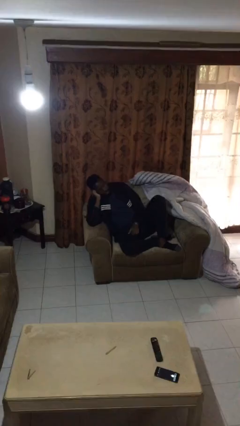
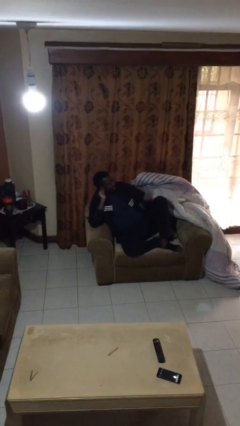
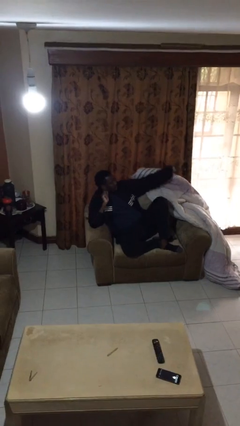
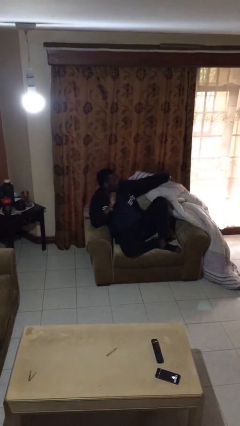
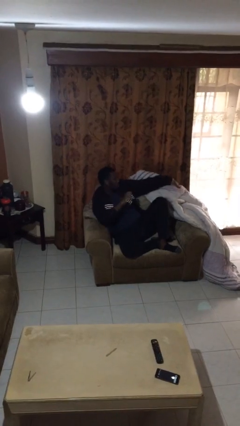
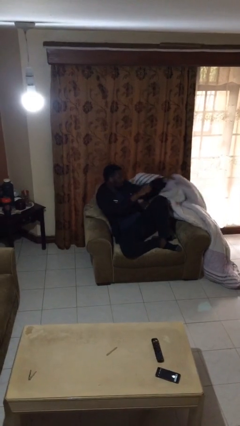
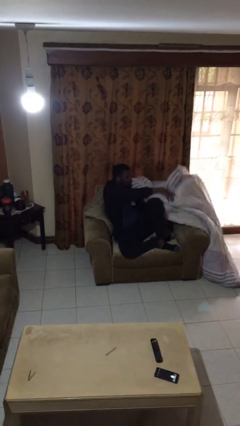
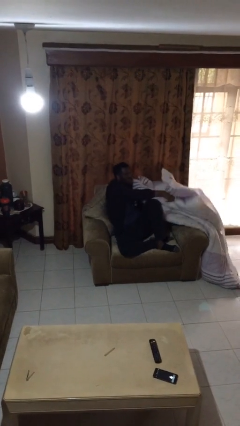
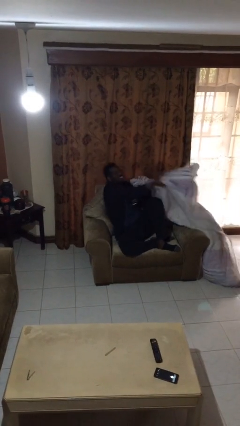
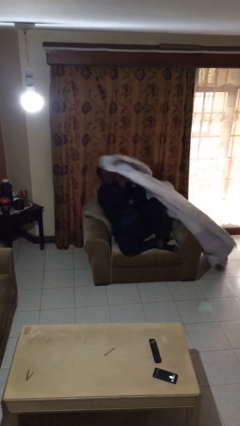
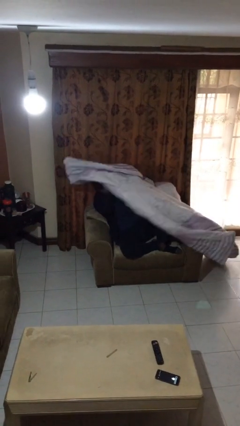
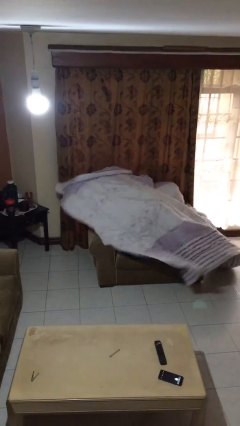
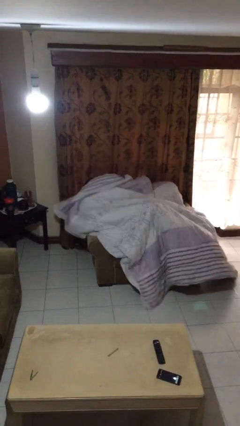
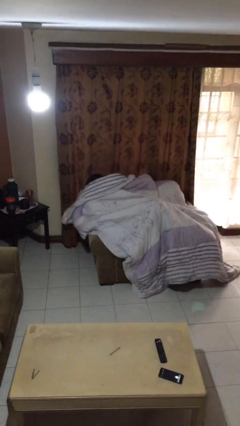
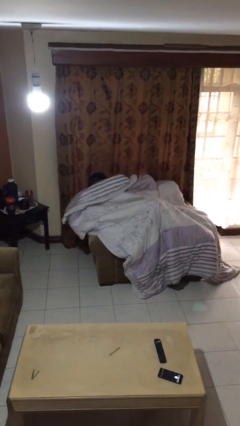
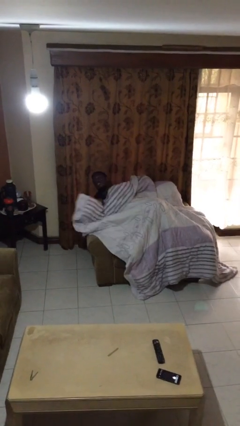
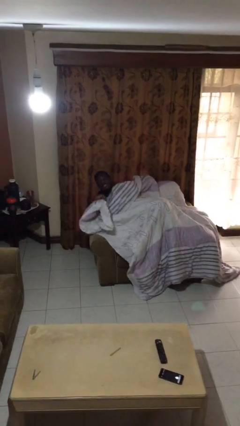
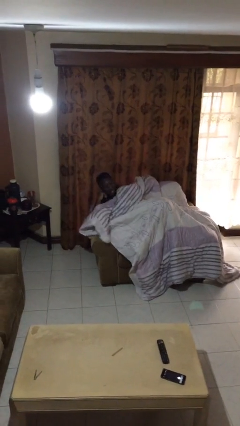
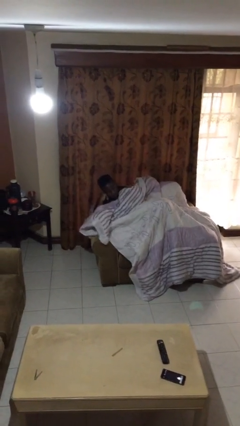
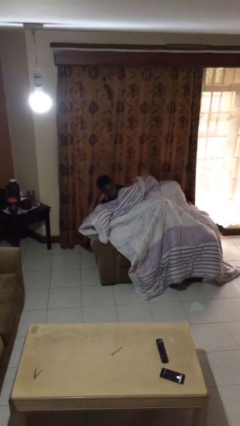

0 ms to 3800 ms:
person covers with blanket

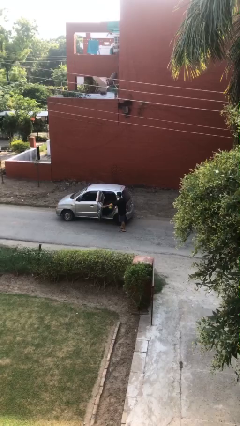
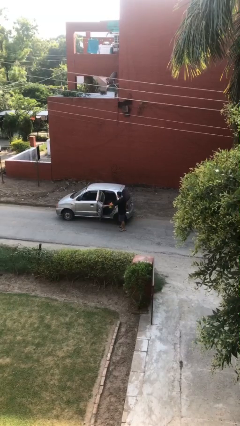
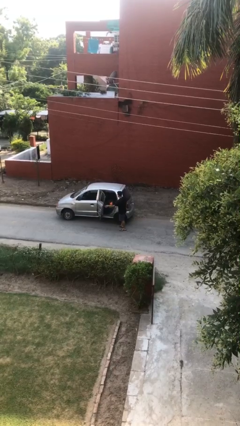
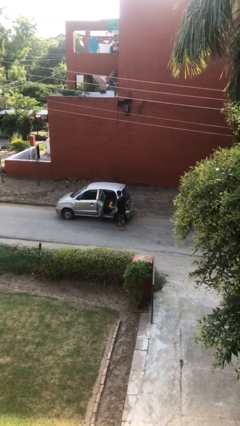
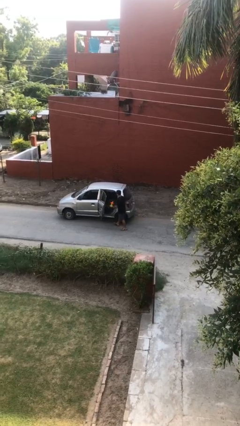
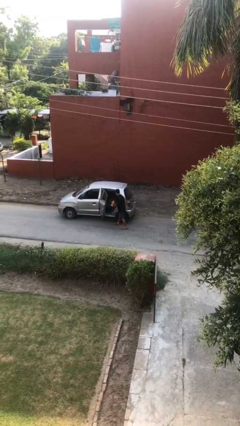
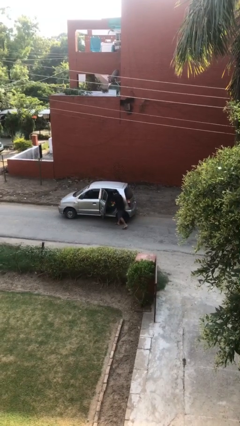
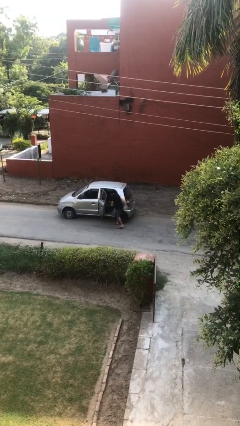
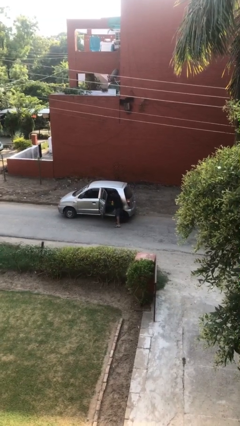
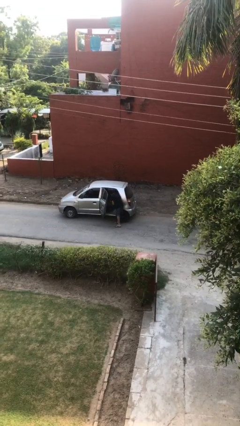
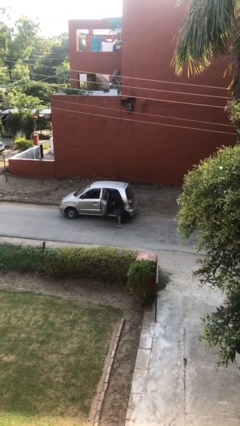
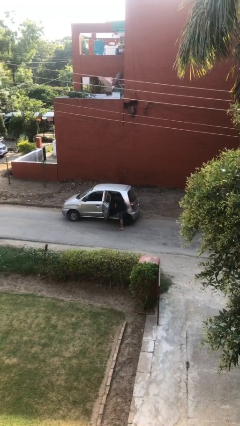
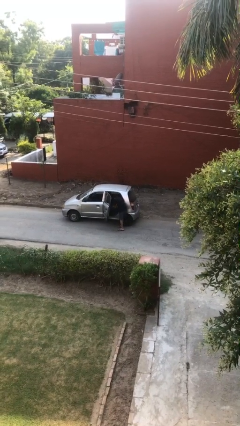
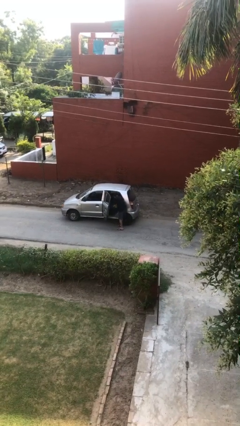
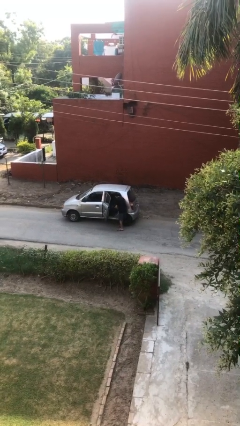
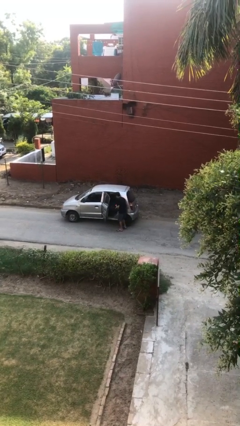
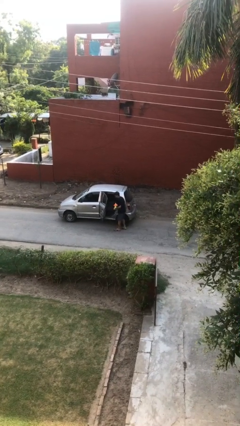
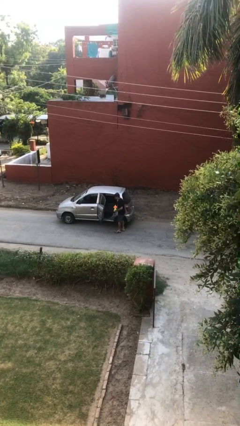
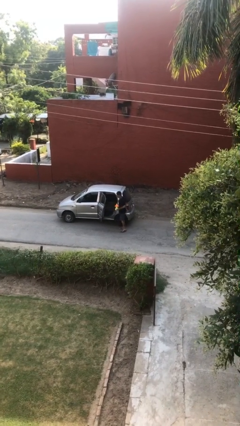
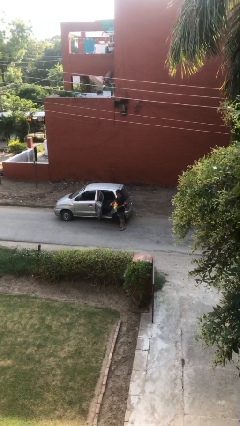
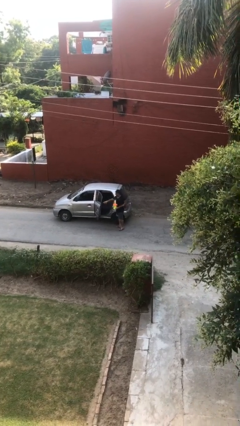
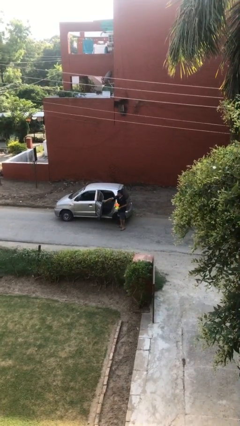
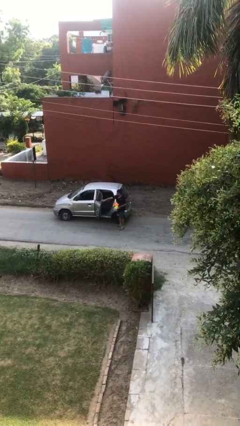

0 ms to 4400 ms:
person unloads car

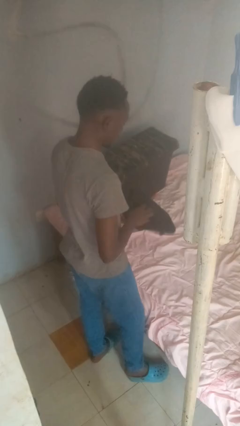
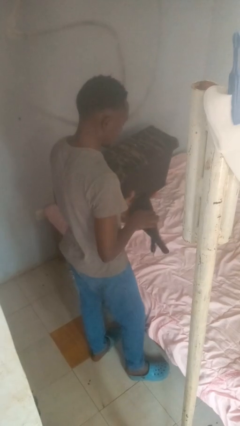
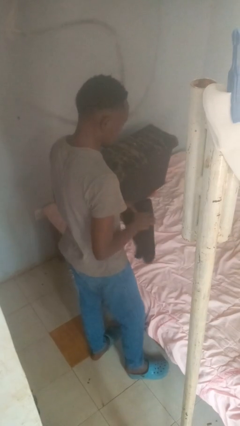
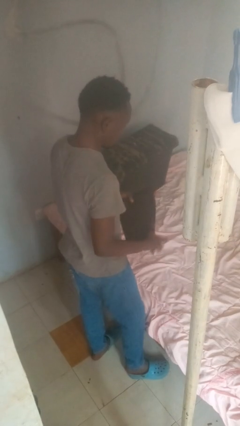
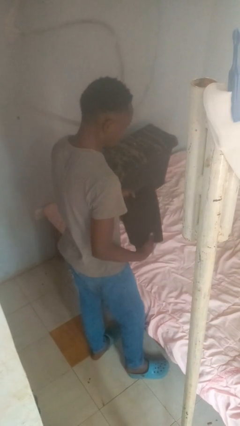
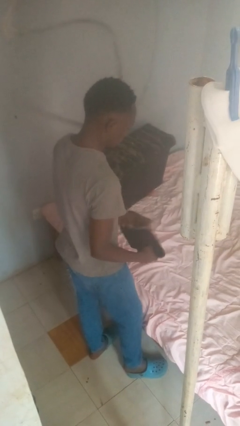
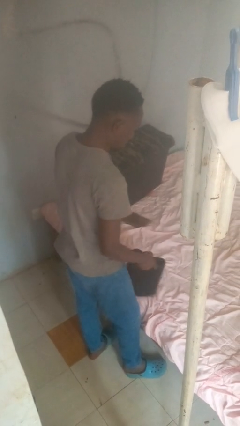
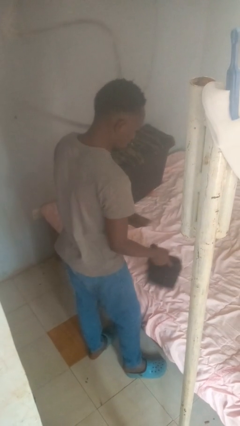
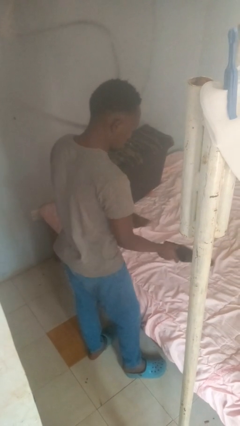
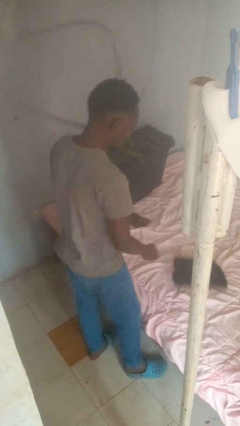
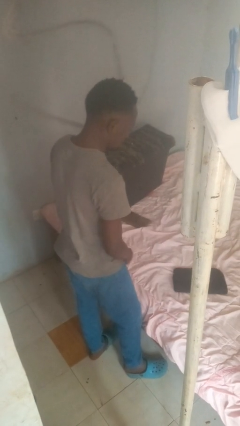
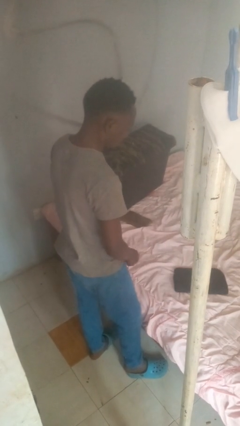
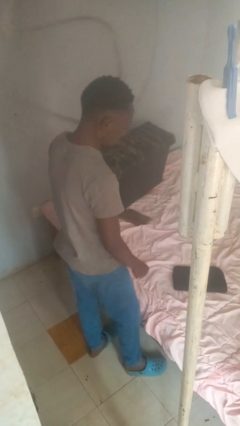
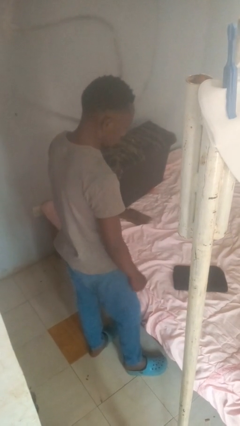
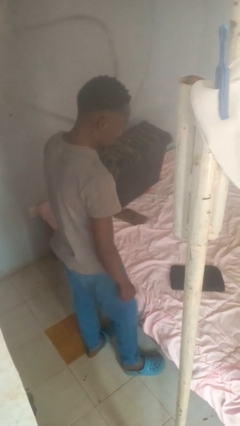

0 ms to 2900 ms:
person puts down object on bed

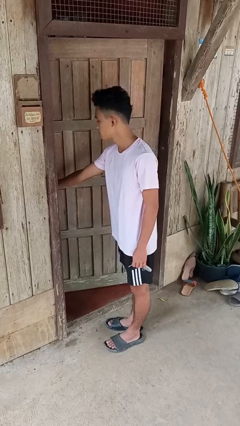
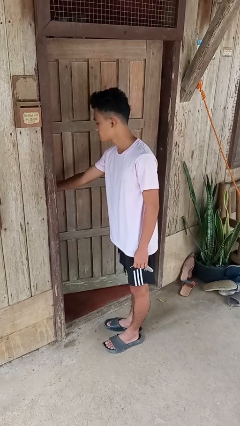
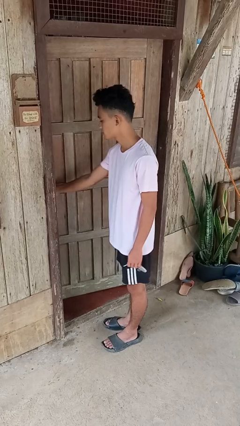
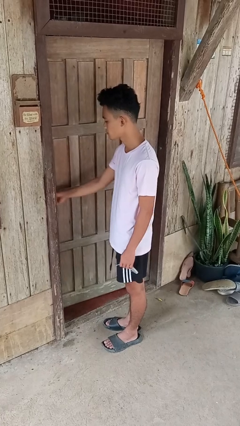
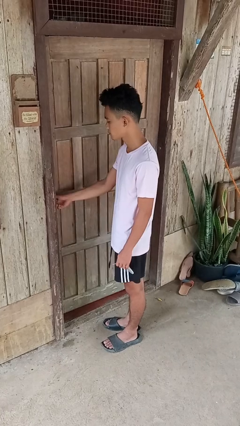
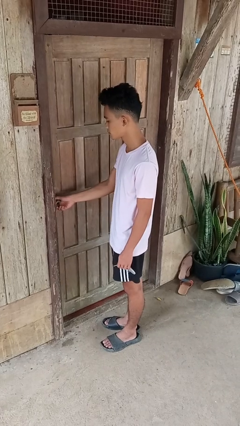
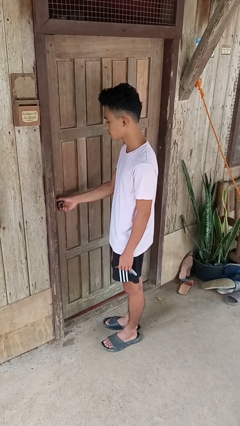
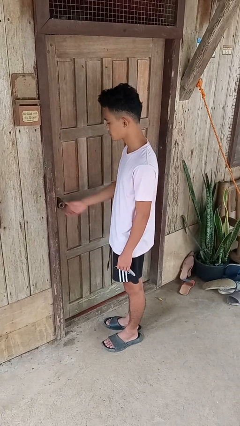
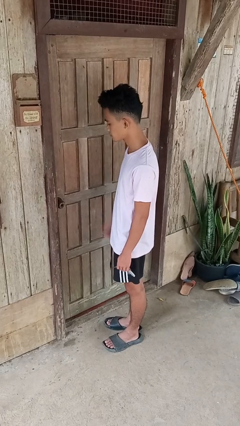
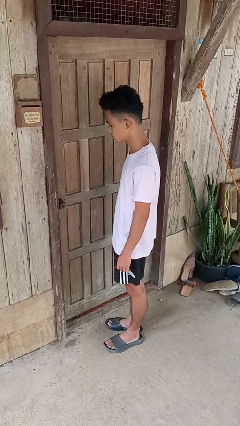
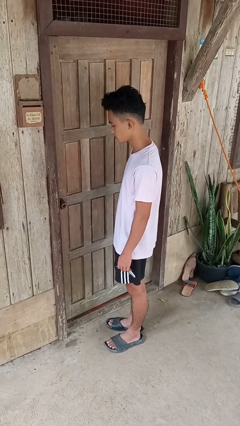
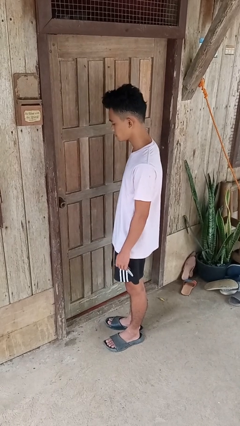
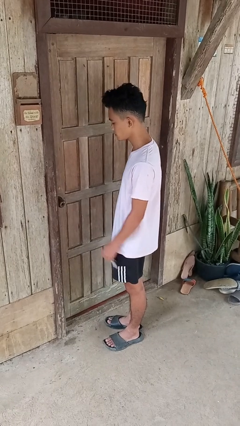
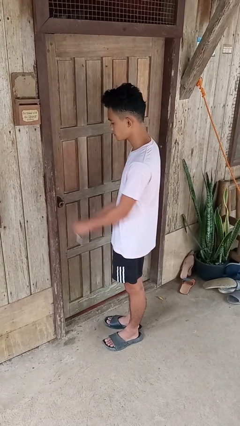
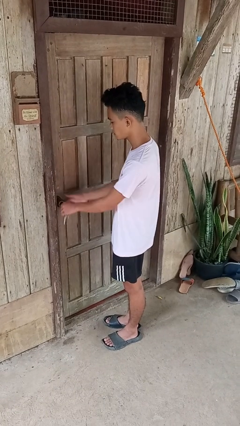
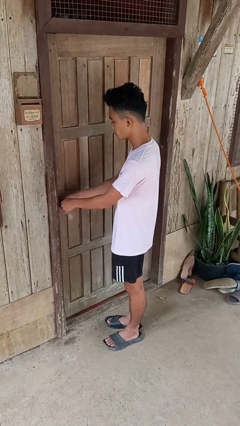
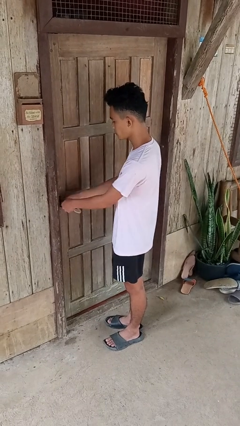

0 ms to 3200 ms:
person closes facility door

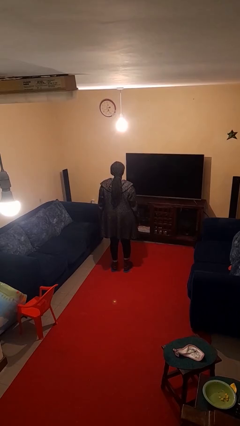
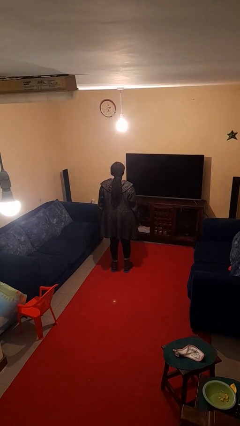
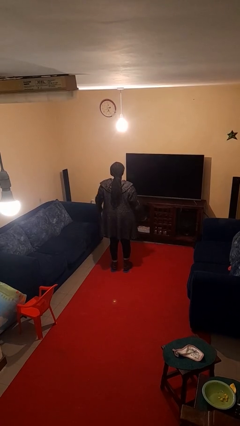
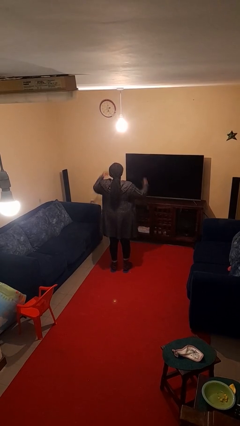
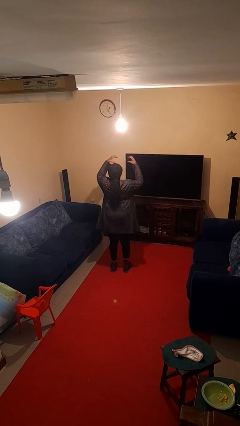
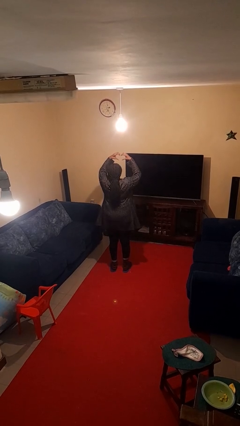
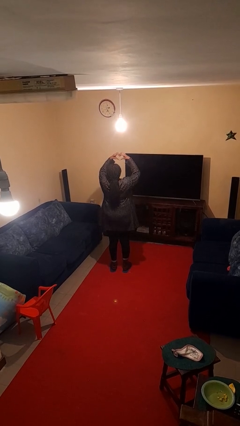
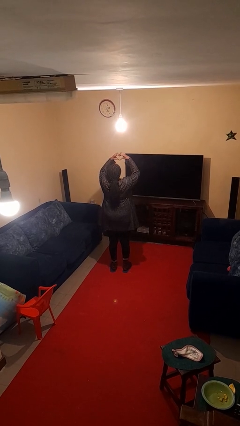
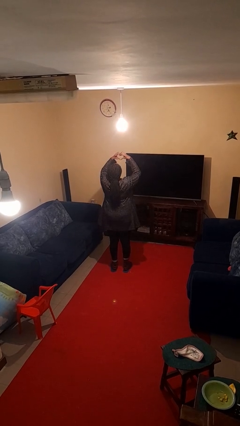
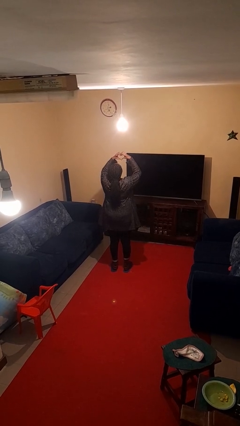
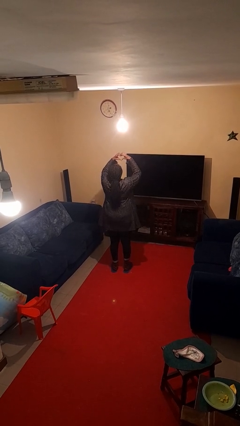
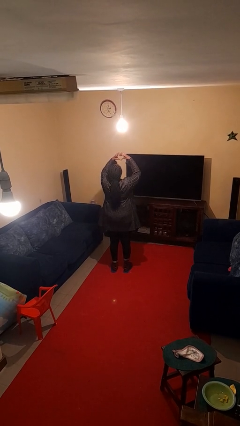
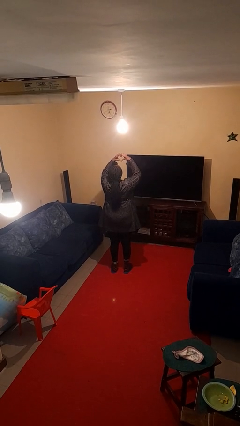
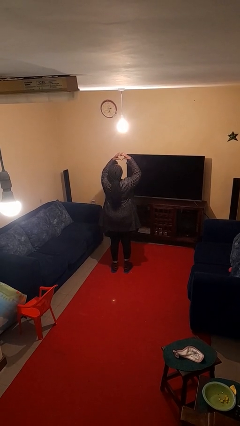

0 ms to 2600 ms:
person gestures heart

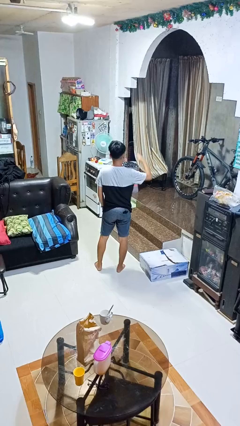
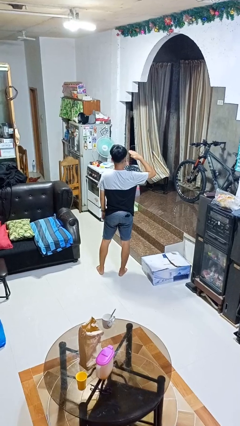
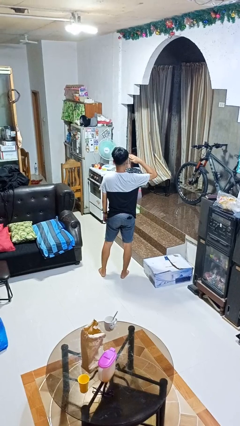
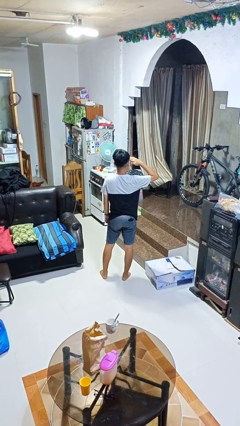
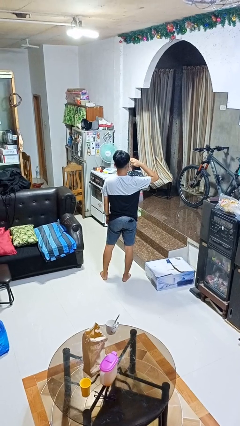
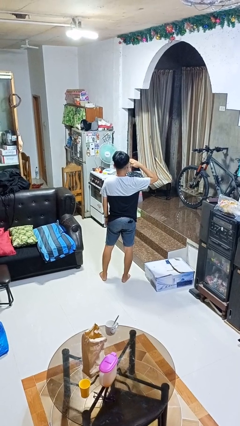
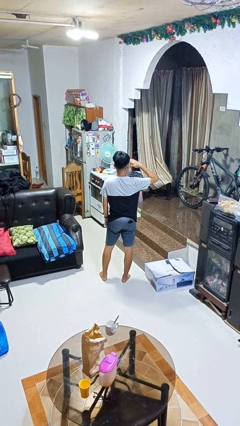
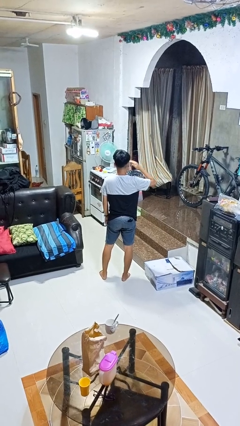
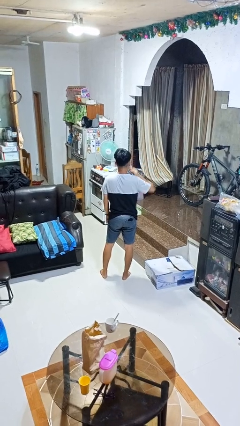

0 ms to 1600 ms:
person salutes
